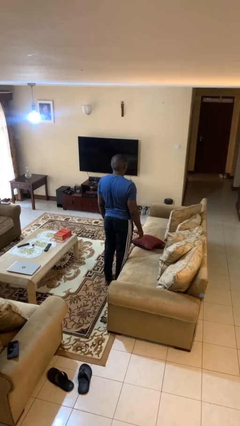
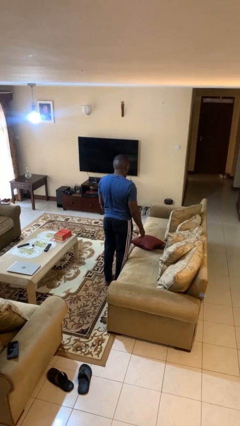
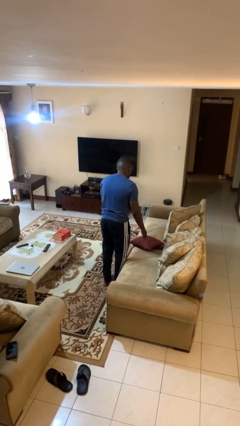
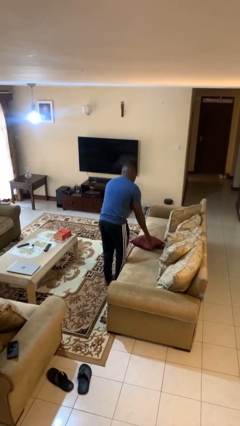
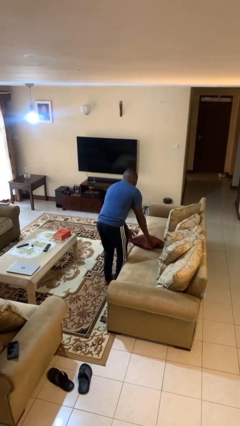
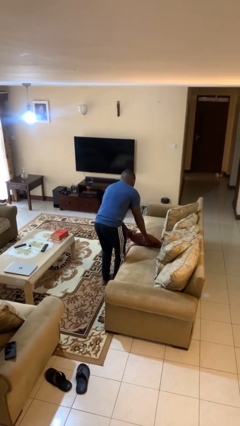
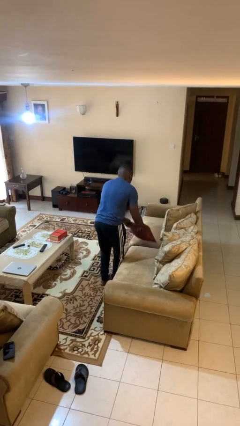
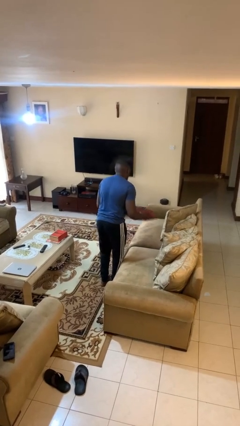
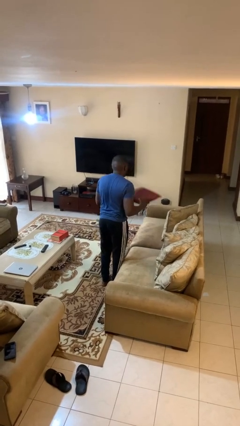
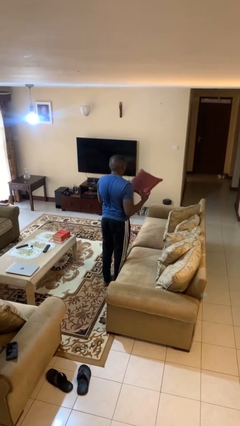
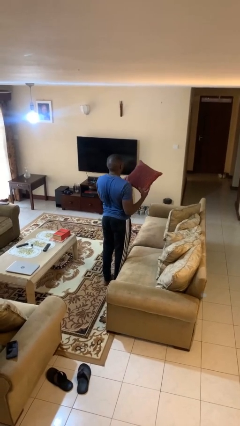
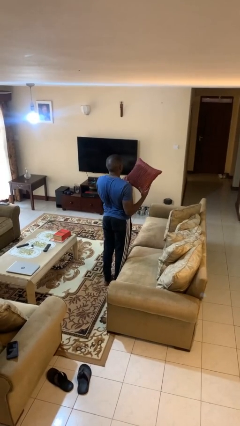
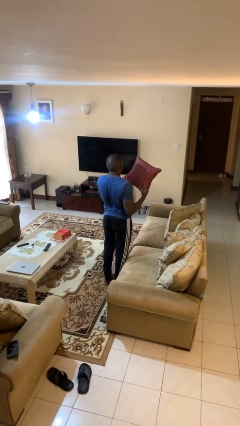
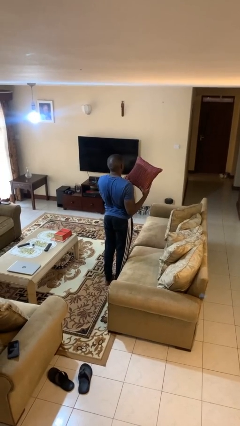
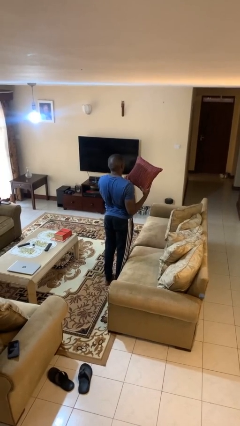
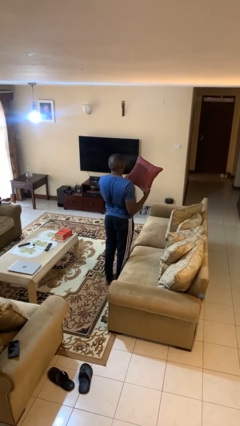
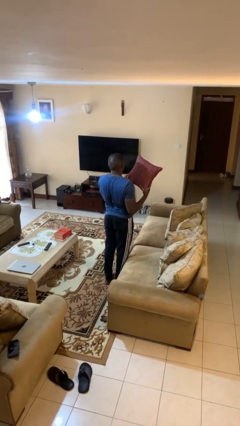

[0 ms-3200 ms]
person picks up object from couch

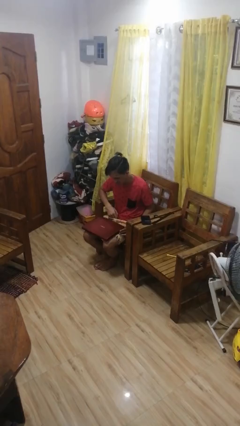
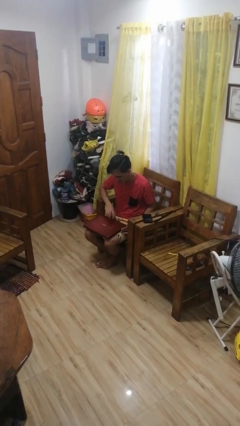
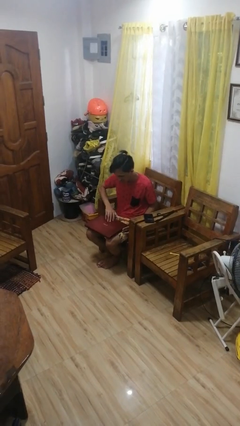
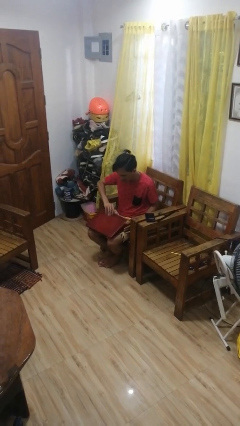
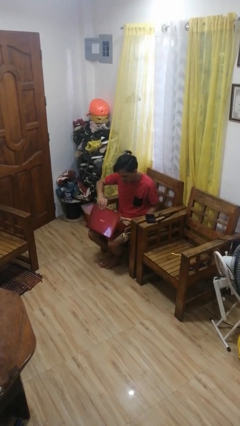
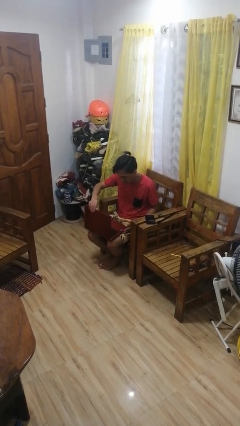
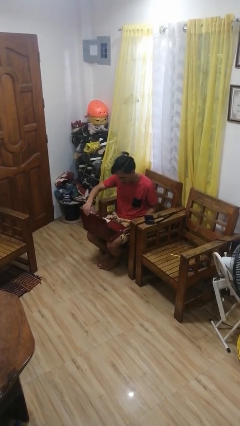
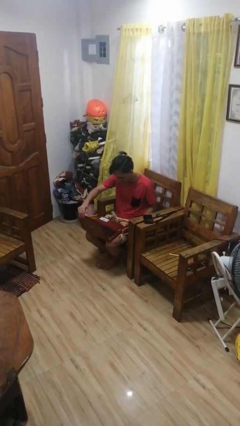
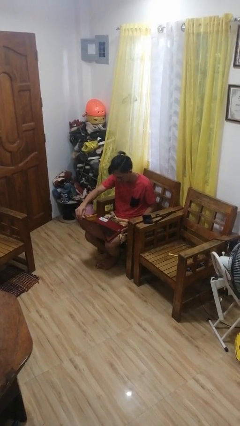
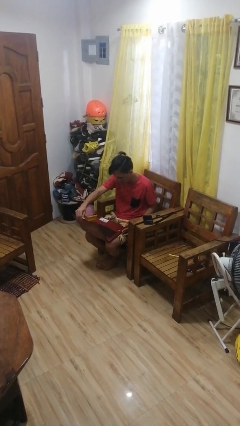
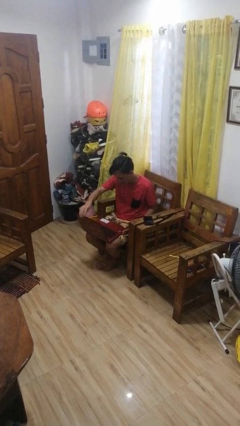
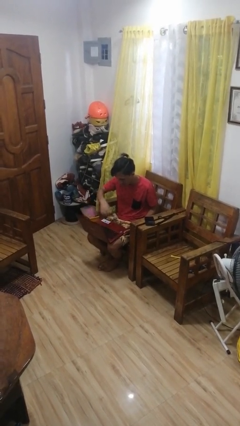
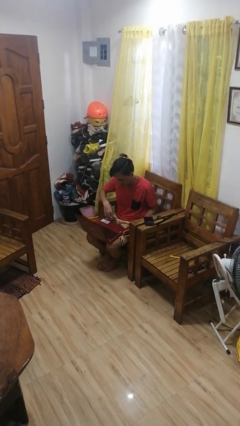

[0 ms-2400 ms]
person opens laptop

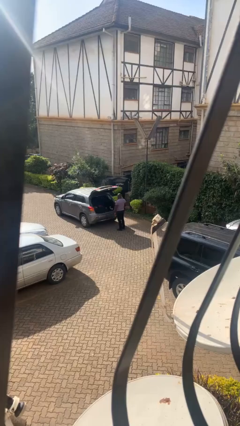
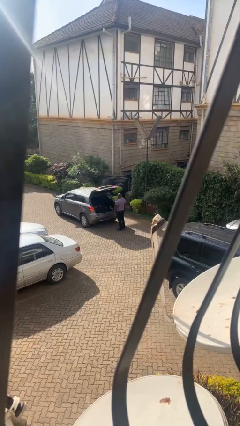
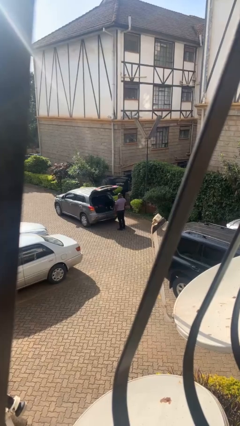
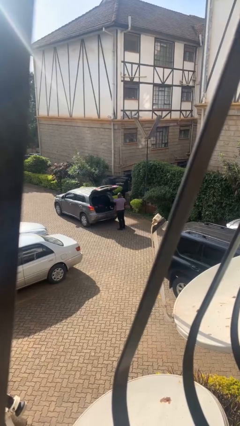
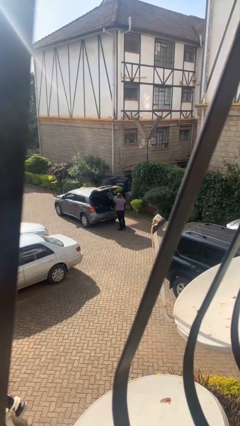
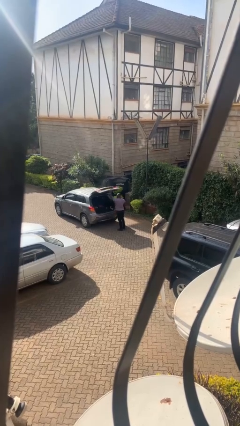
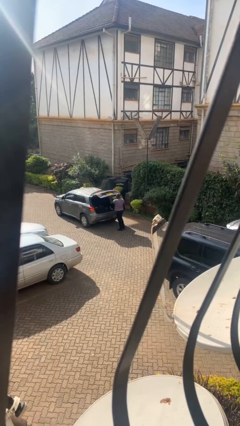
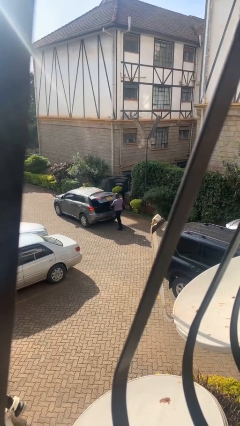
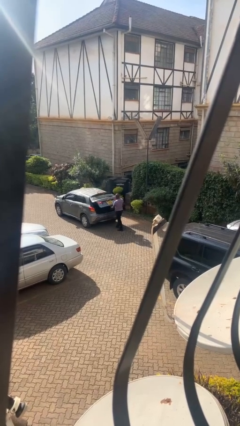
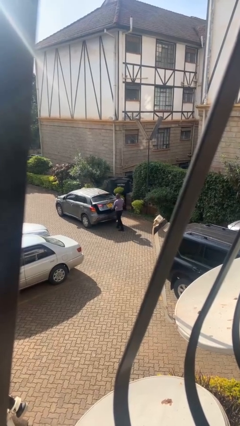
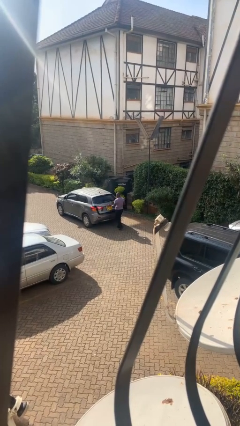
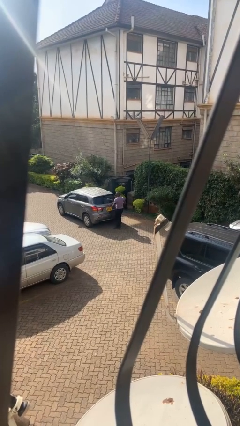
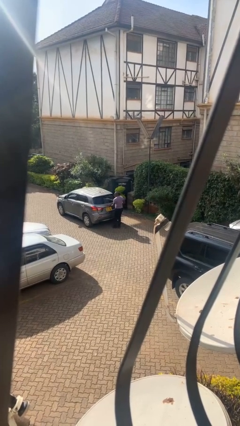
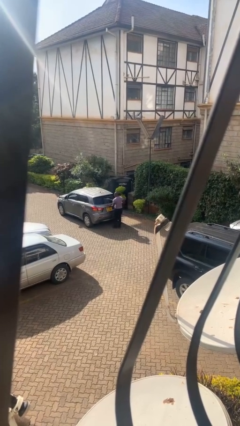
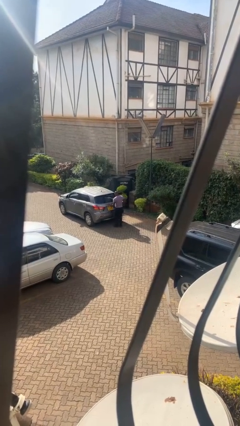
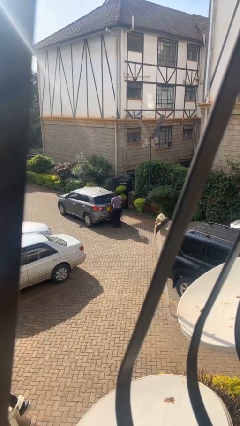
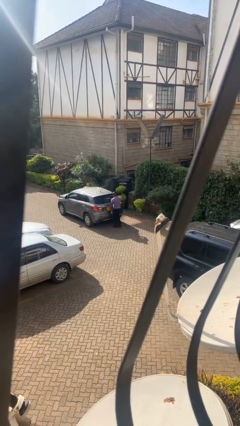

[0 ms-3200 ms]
person closes car trunk

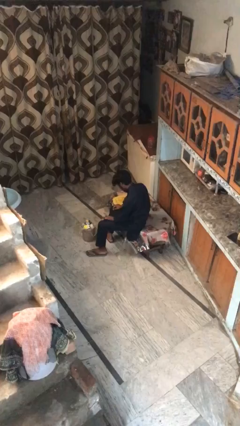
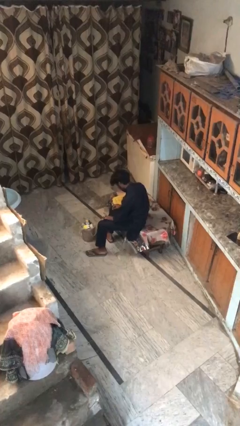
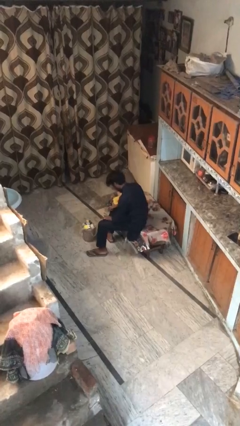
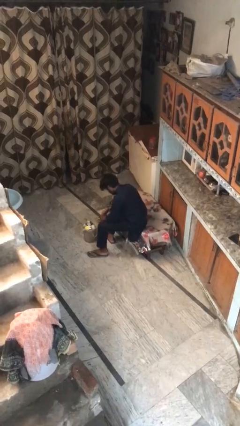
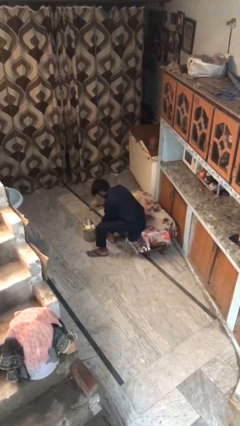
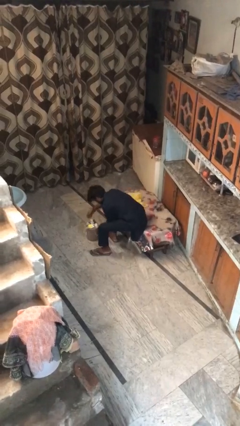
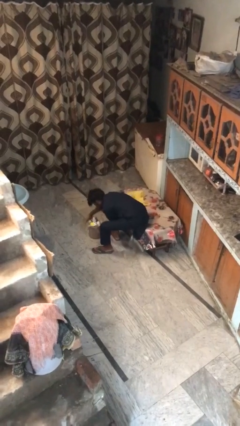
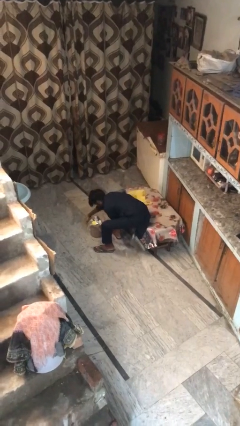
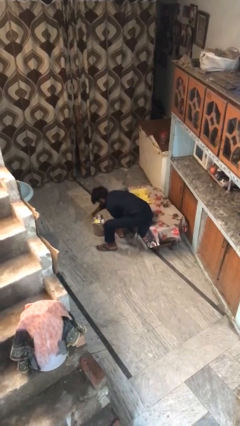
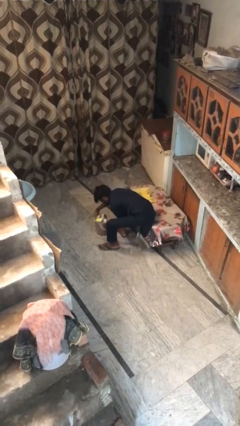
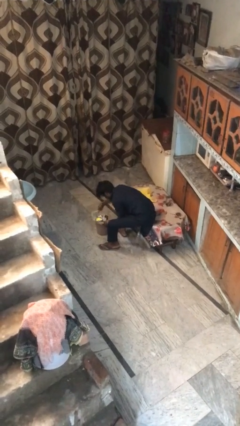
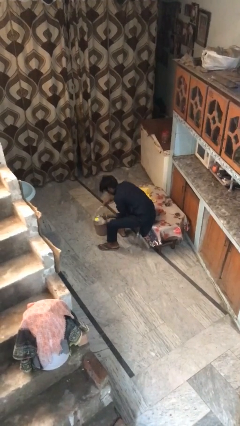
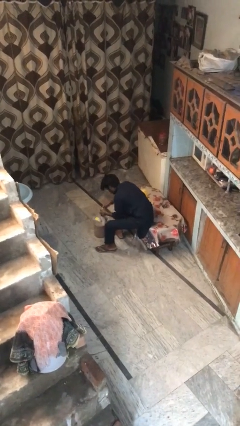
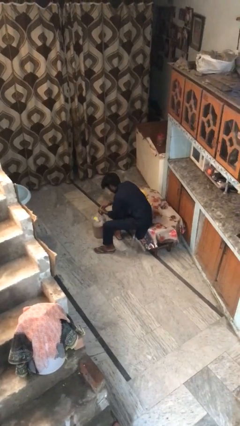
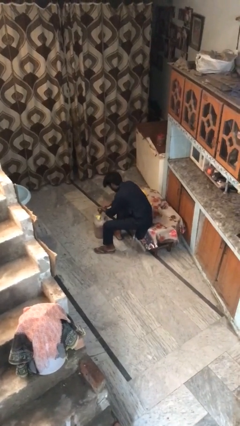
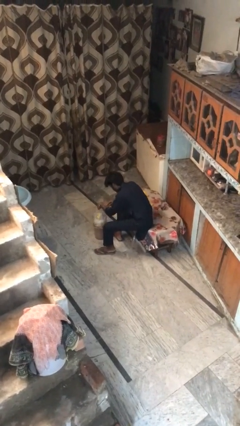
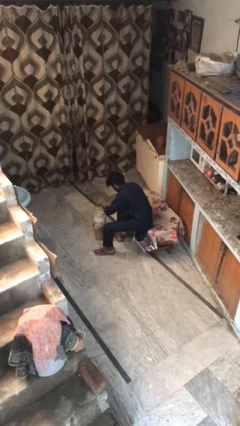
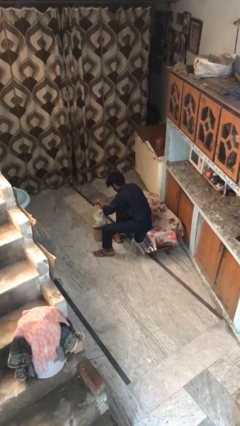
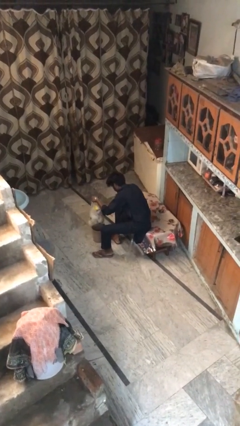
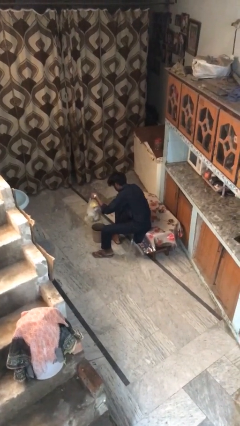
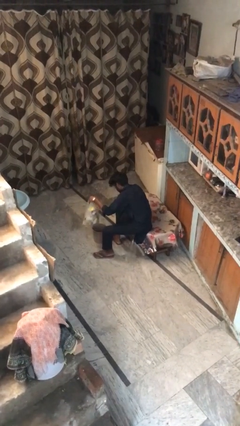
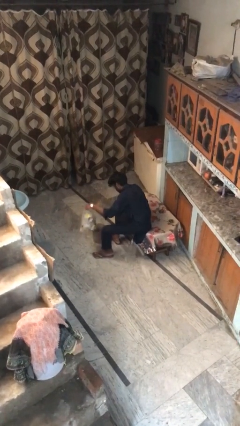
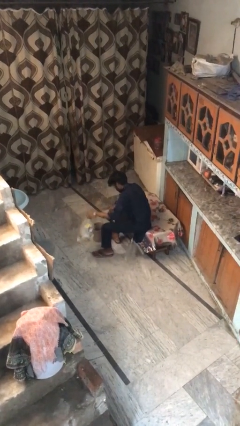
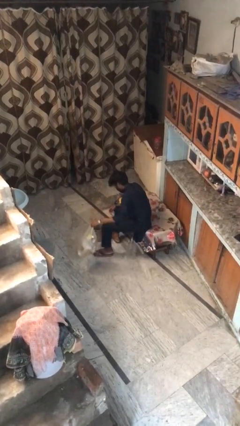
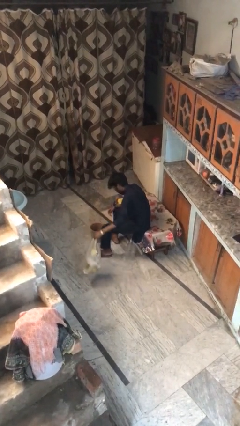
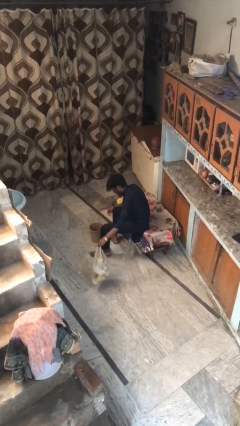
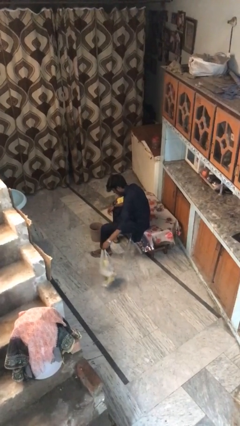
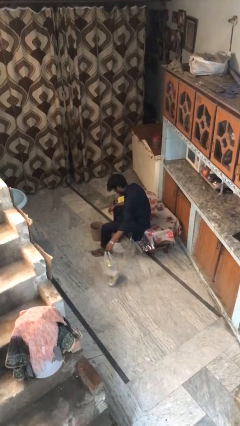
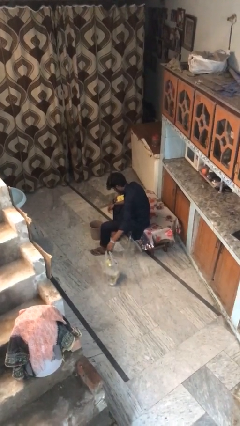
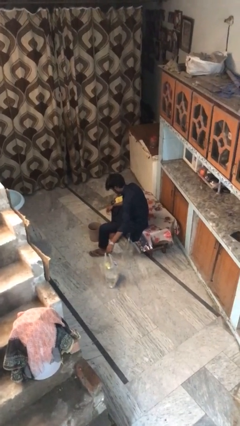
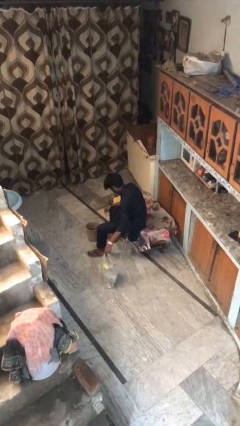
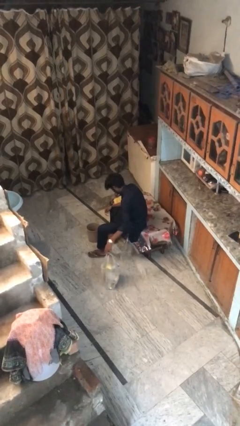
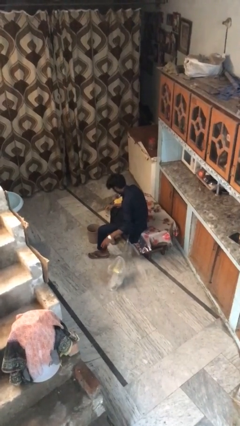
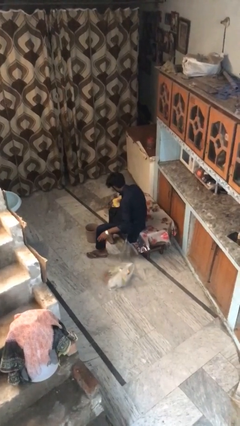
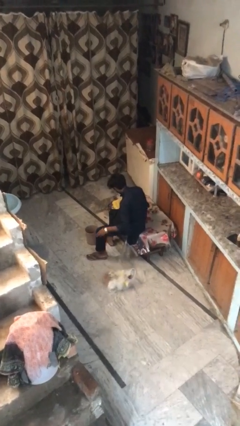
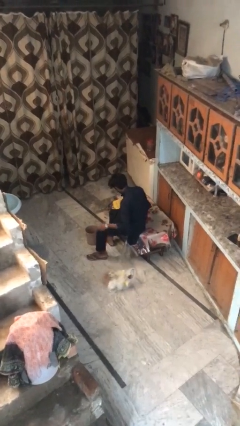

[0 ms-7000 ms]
person removes trashbag from trashcan

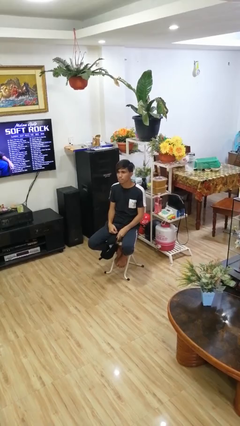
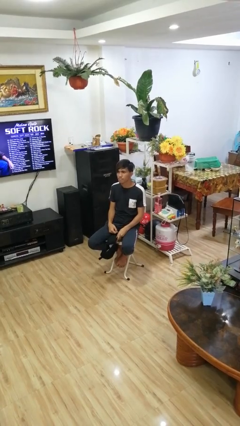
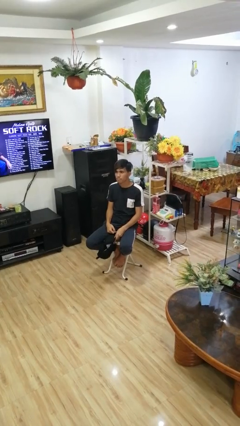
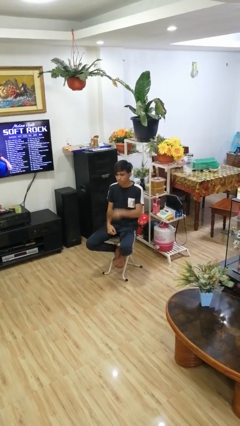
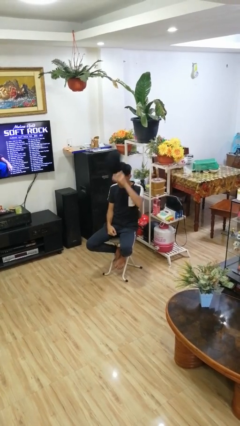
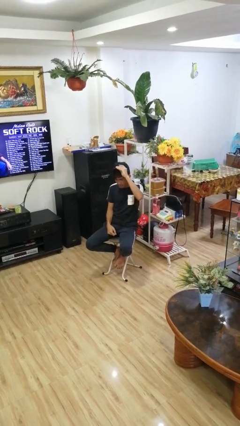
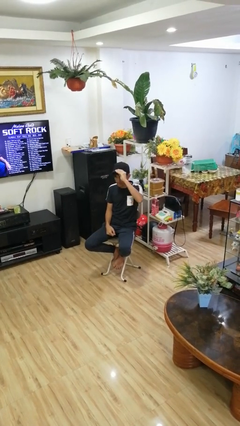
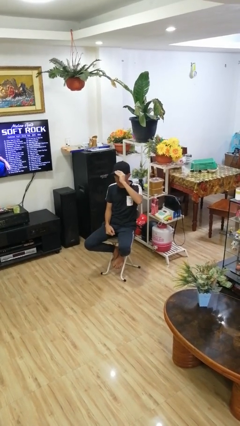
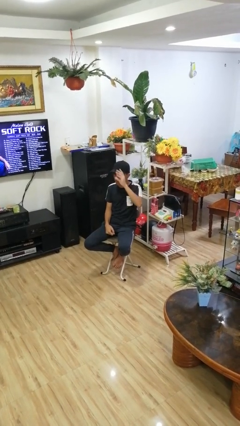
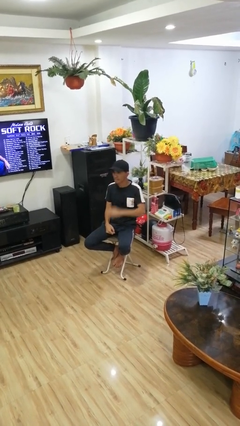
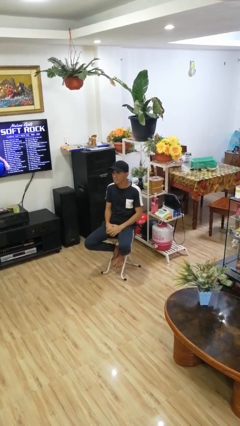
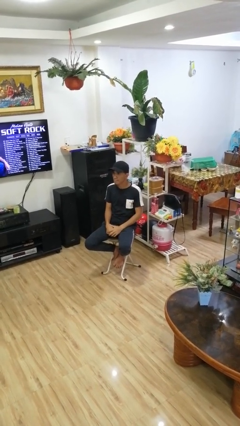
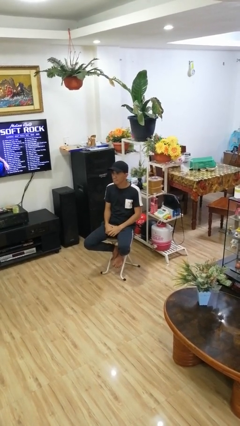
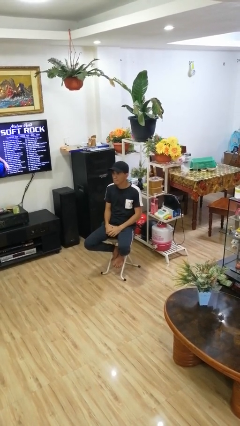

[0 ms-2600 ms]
person puts on hat
